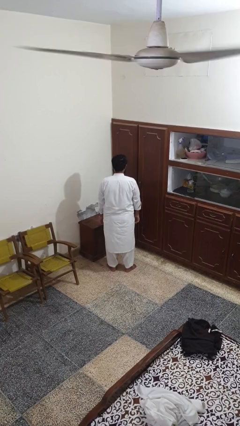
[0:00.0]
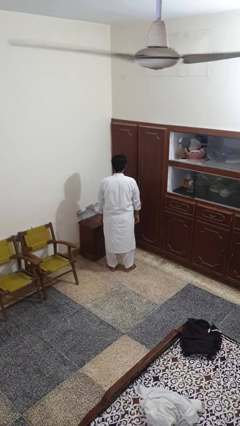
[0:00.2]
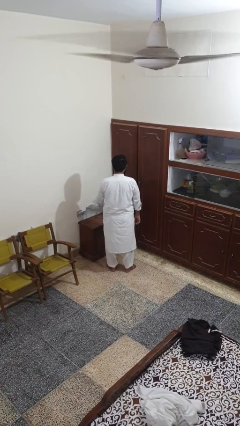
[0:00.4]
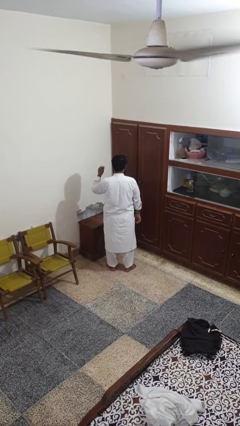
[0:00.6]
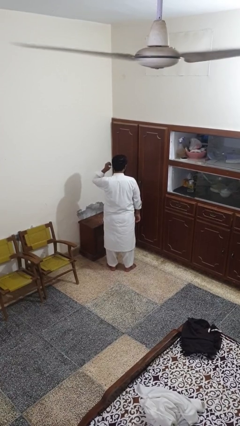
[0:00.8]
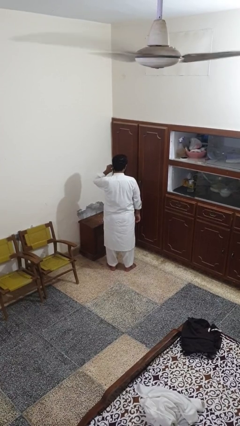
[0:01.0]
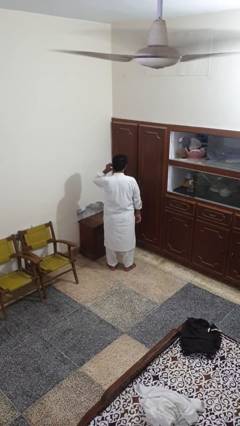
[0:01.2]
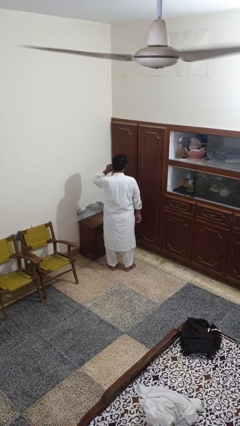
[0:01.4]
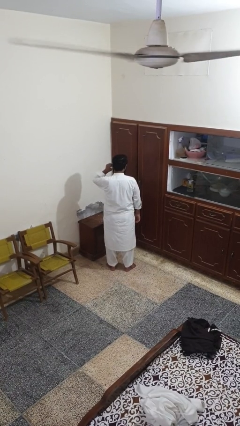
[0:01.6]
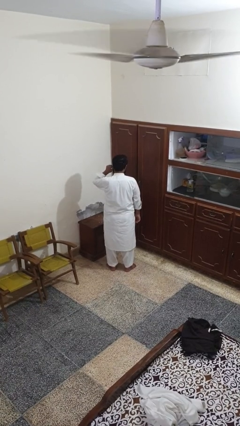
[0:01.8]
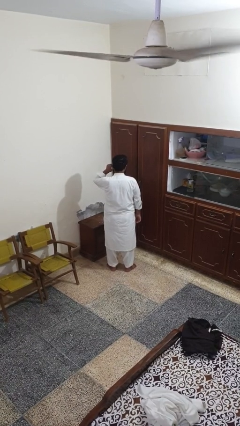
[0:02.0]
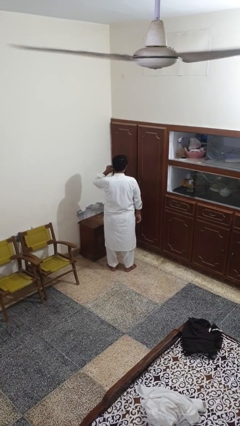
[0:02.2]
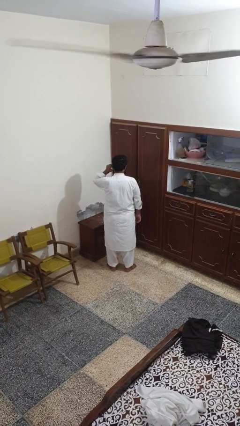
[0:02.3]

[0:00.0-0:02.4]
person touches earlobe

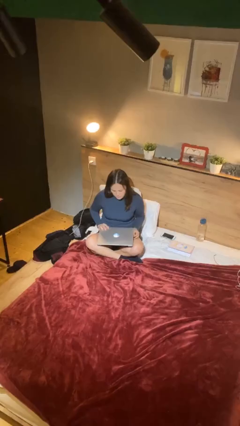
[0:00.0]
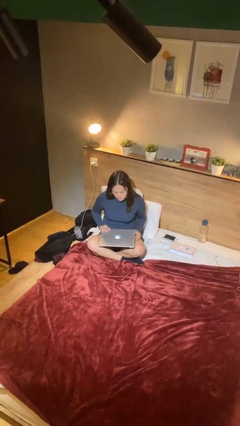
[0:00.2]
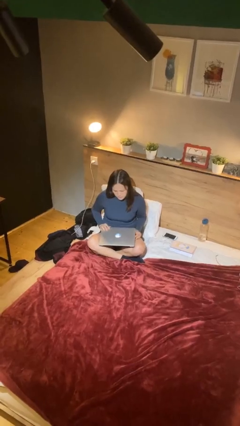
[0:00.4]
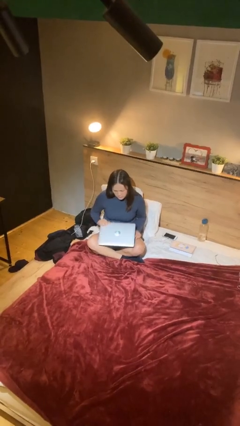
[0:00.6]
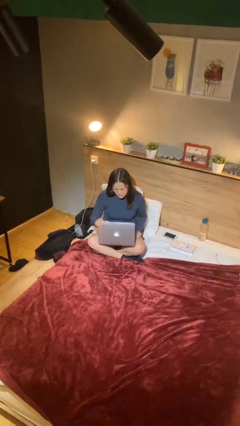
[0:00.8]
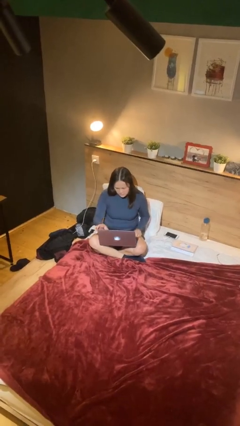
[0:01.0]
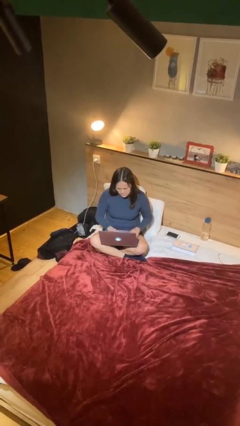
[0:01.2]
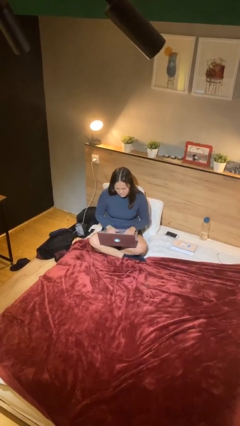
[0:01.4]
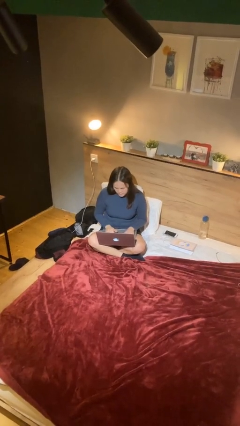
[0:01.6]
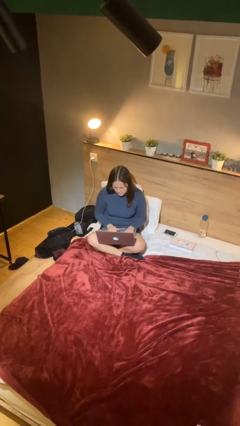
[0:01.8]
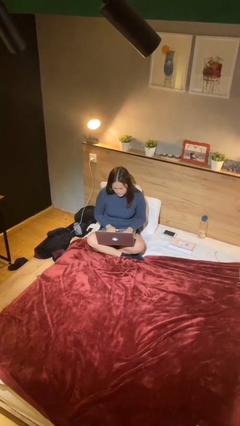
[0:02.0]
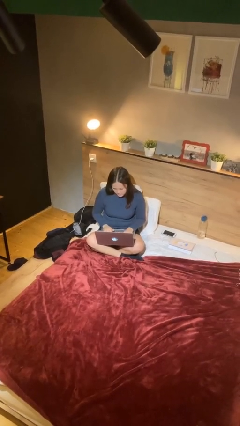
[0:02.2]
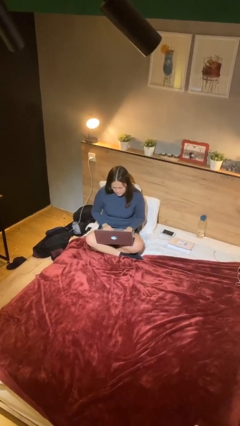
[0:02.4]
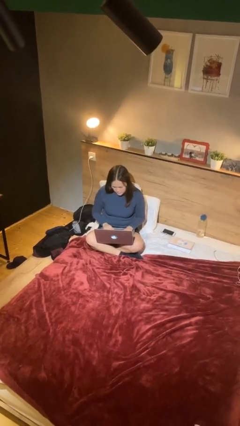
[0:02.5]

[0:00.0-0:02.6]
person interacts with laptop

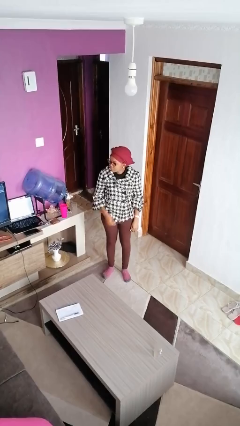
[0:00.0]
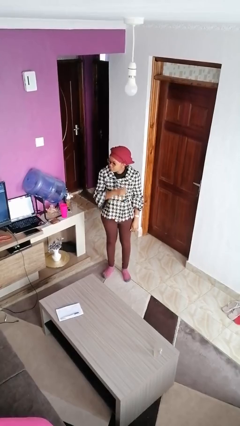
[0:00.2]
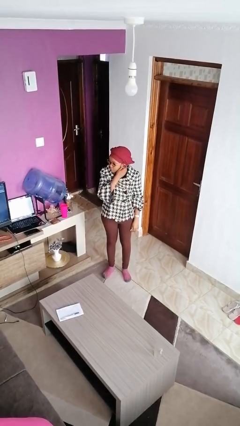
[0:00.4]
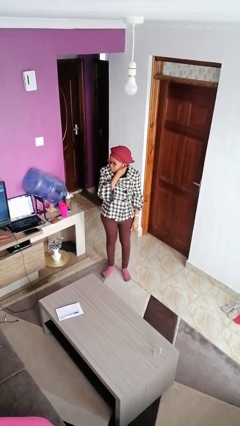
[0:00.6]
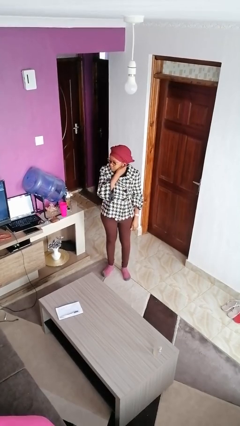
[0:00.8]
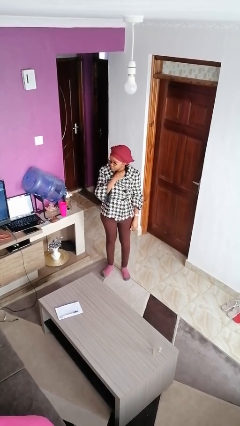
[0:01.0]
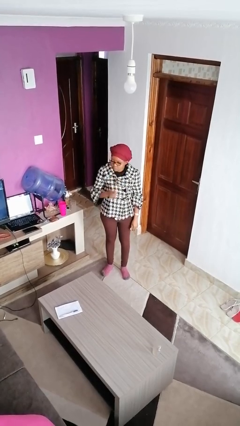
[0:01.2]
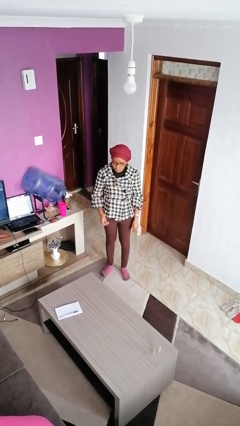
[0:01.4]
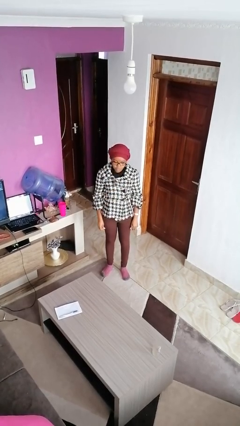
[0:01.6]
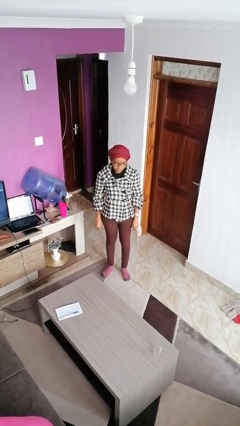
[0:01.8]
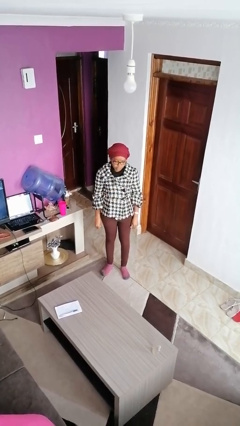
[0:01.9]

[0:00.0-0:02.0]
person takes off earrings

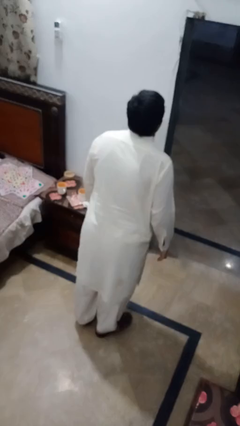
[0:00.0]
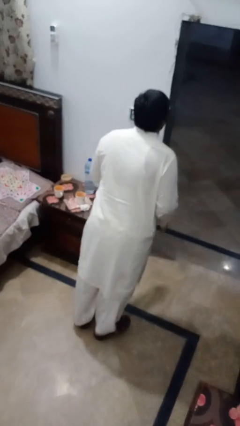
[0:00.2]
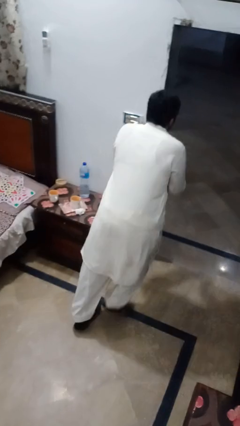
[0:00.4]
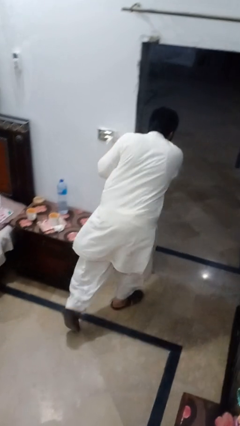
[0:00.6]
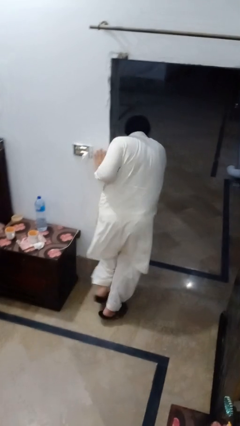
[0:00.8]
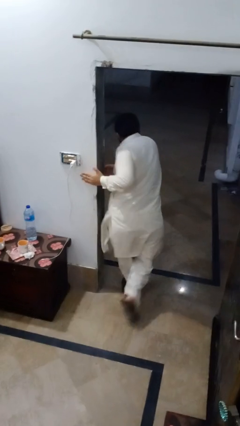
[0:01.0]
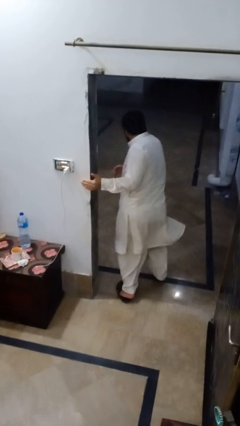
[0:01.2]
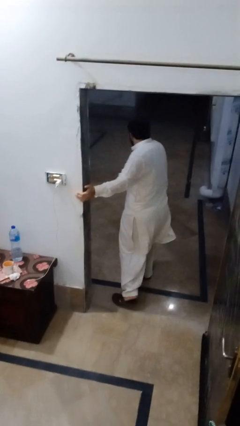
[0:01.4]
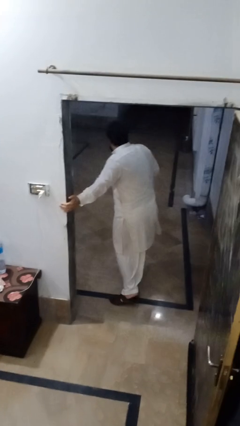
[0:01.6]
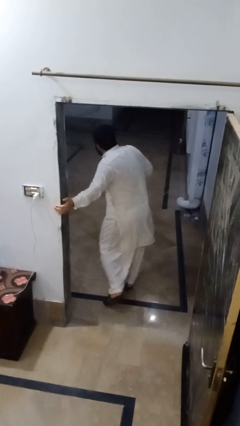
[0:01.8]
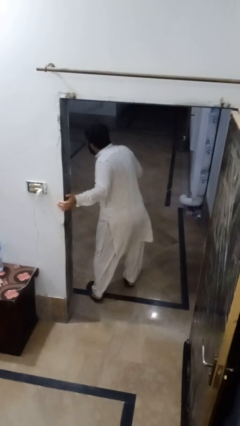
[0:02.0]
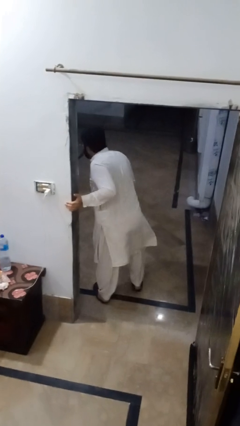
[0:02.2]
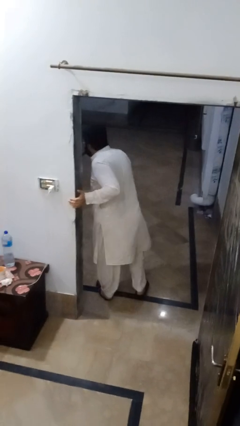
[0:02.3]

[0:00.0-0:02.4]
person bumps into wall

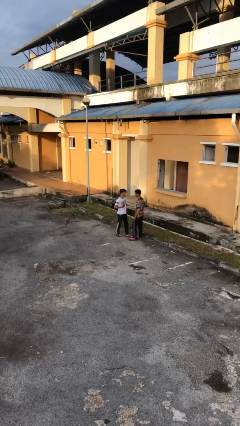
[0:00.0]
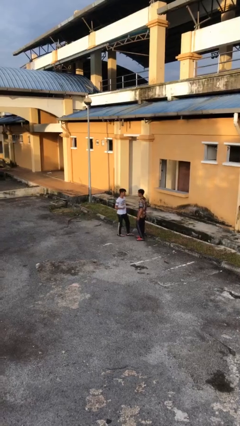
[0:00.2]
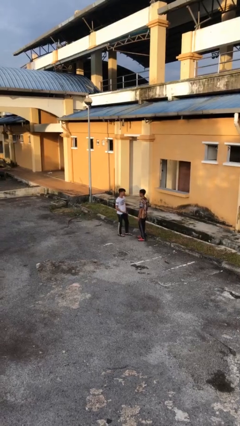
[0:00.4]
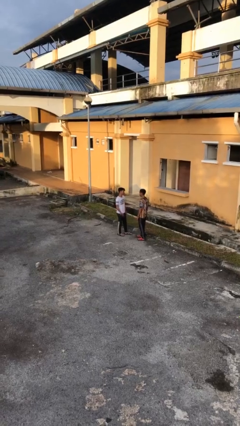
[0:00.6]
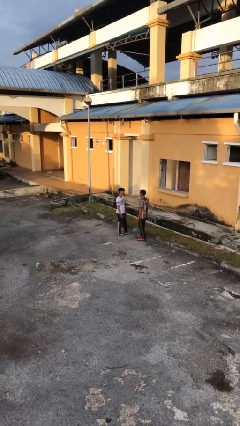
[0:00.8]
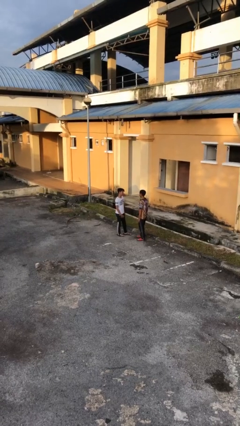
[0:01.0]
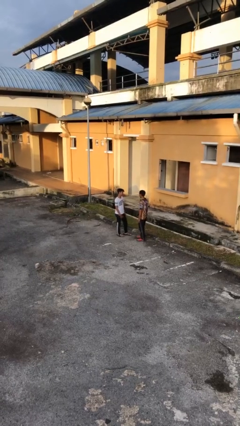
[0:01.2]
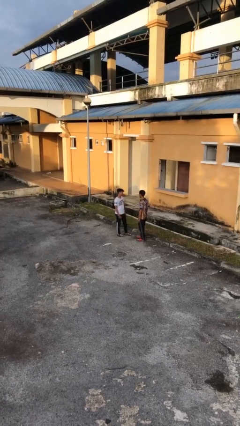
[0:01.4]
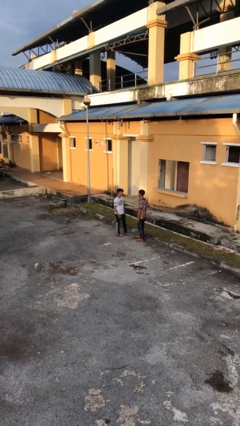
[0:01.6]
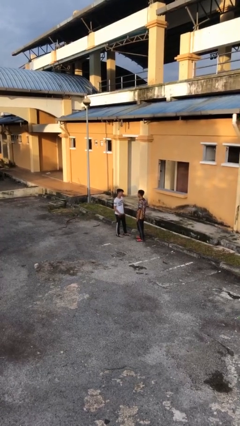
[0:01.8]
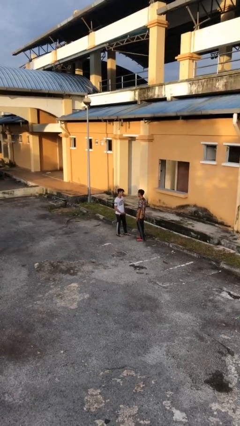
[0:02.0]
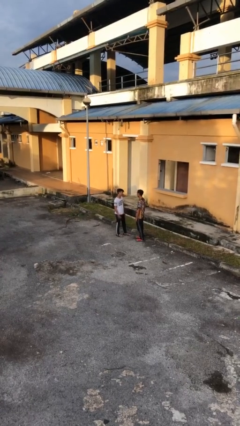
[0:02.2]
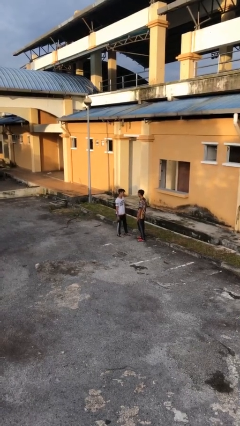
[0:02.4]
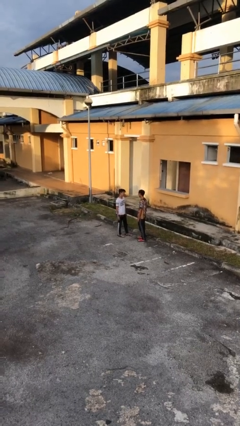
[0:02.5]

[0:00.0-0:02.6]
person talks to person

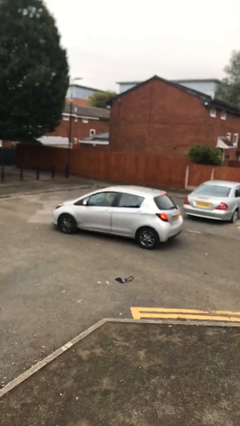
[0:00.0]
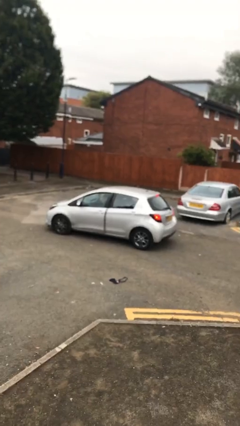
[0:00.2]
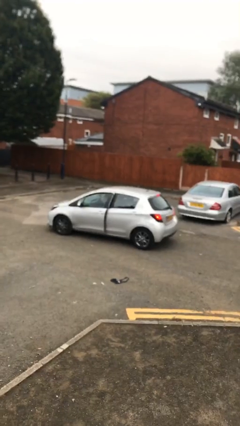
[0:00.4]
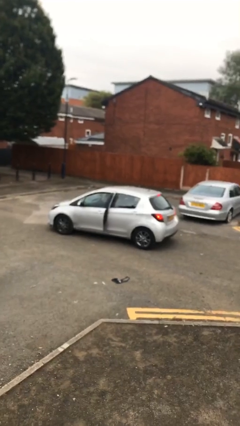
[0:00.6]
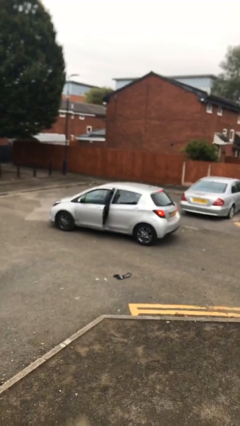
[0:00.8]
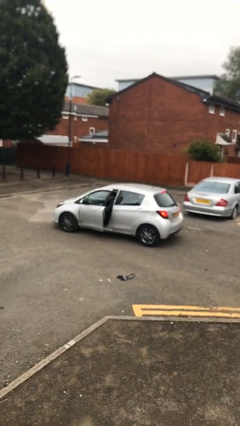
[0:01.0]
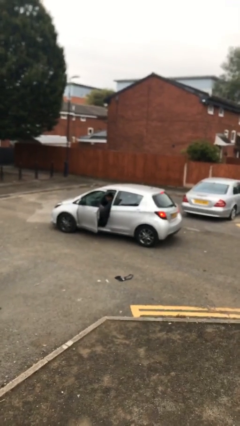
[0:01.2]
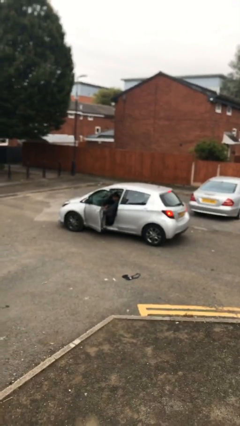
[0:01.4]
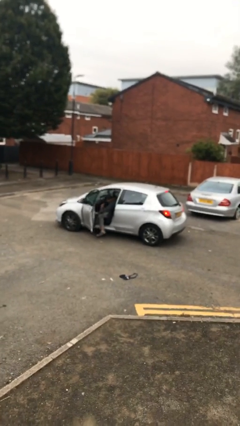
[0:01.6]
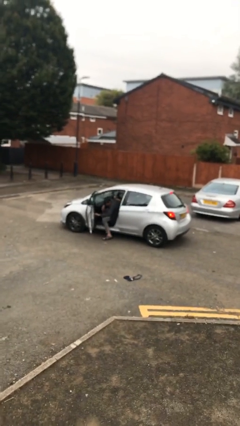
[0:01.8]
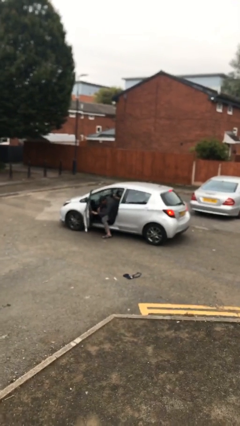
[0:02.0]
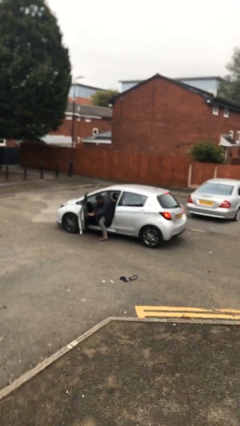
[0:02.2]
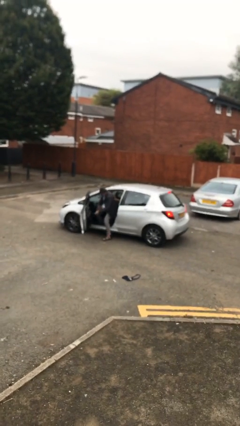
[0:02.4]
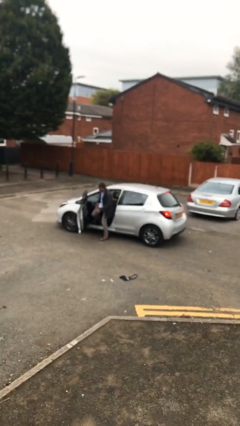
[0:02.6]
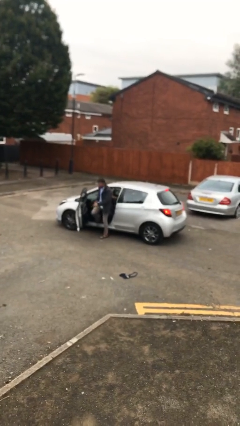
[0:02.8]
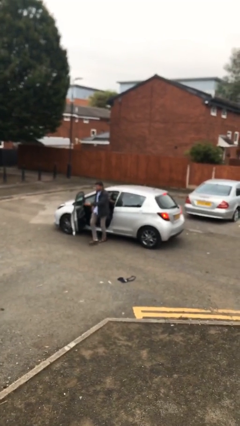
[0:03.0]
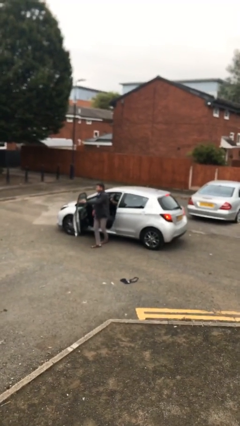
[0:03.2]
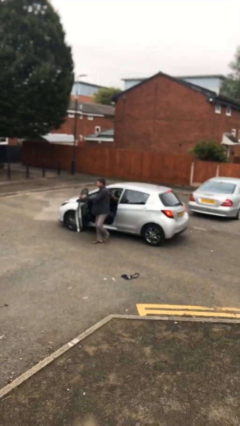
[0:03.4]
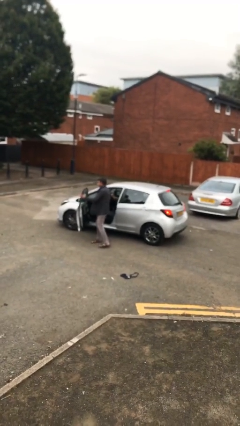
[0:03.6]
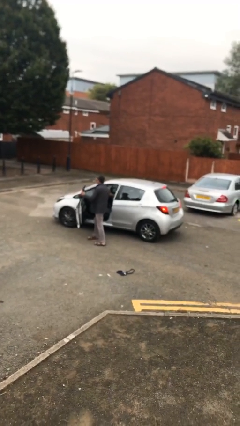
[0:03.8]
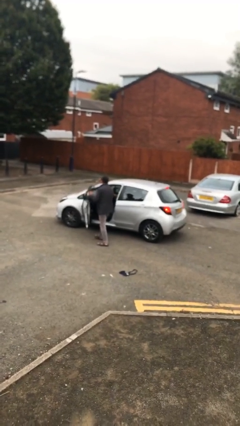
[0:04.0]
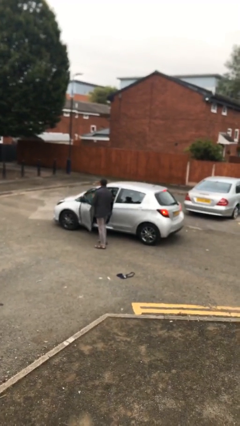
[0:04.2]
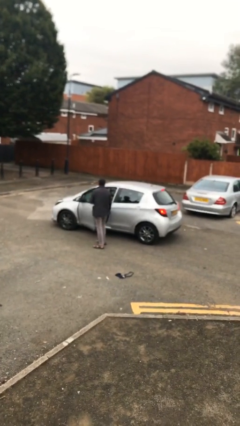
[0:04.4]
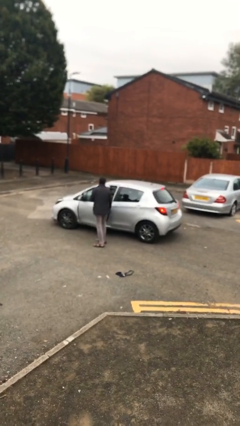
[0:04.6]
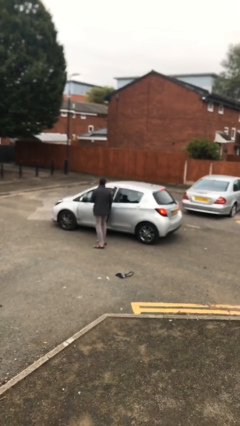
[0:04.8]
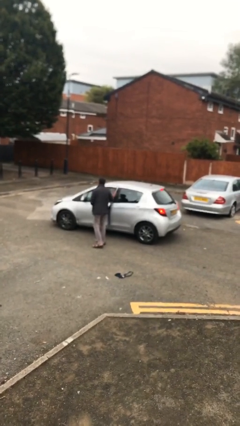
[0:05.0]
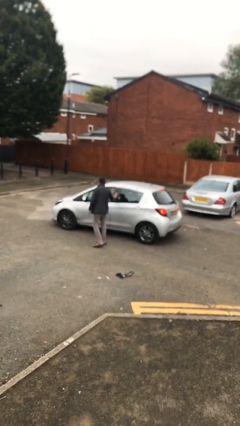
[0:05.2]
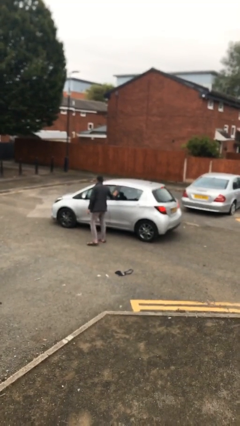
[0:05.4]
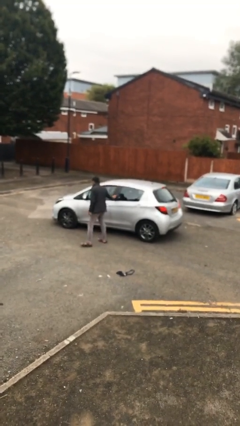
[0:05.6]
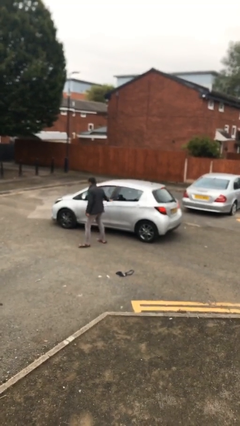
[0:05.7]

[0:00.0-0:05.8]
car drops off person
